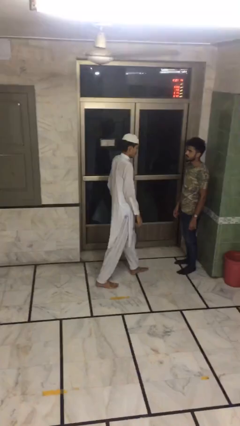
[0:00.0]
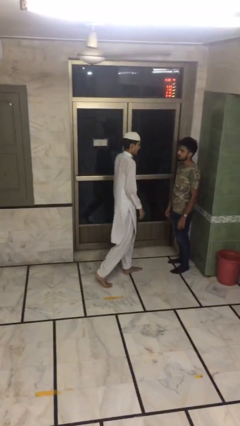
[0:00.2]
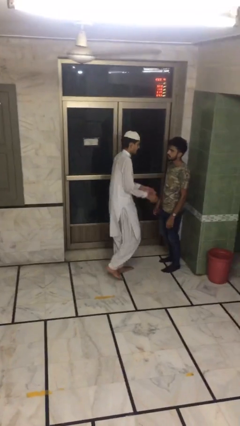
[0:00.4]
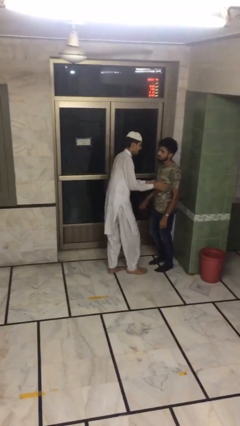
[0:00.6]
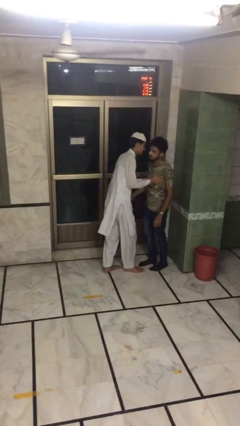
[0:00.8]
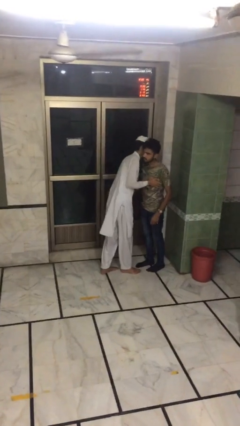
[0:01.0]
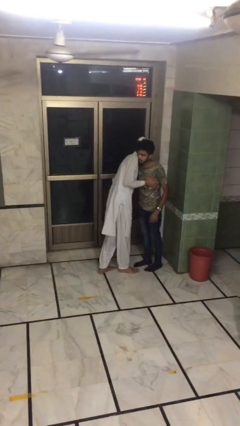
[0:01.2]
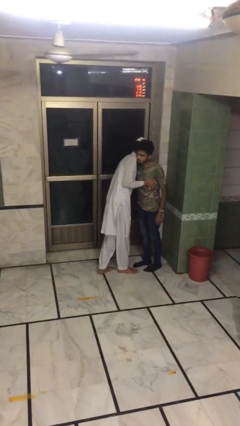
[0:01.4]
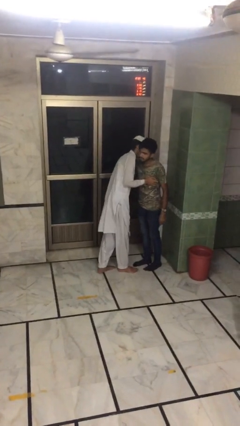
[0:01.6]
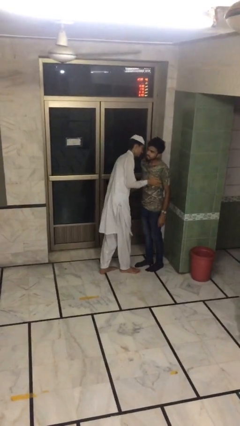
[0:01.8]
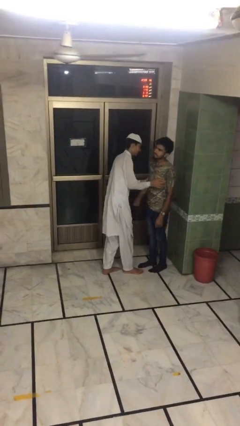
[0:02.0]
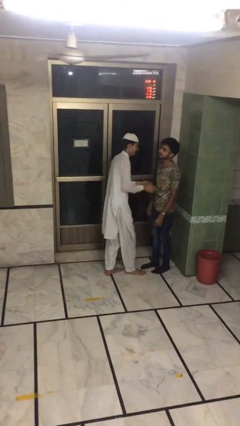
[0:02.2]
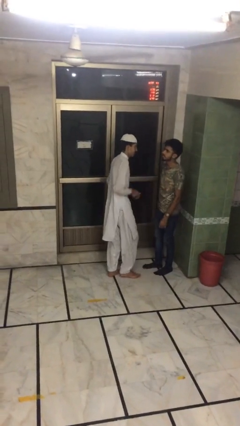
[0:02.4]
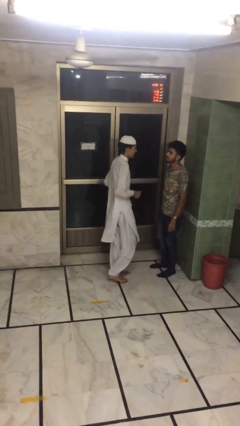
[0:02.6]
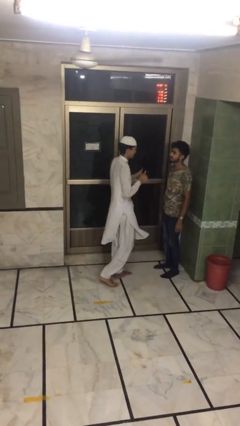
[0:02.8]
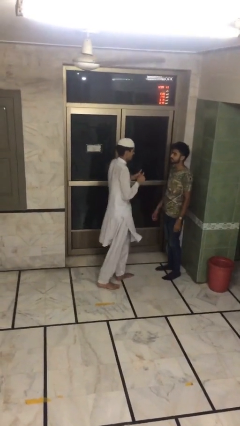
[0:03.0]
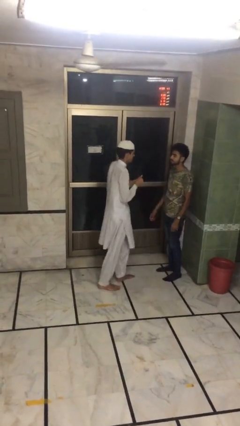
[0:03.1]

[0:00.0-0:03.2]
person embraces person

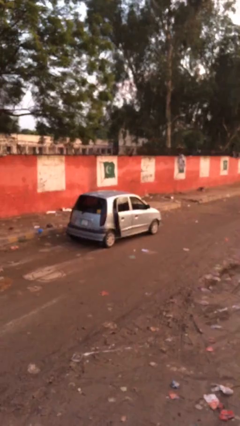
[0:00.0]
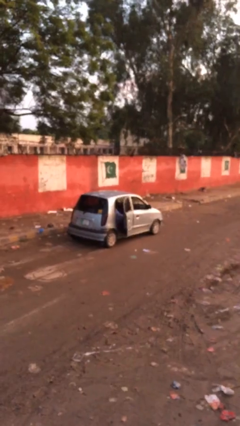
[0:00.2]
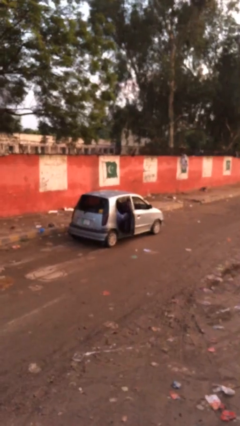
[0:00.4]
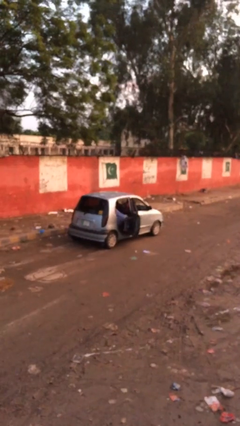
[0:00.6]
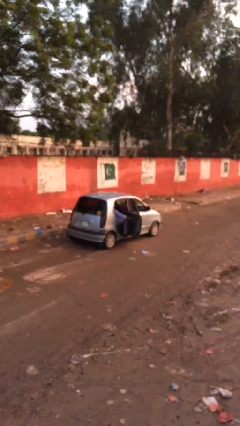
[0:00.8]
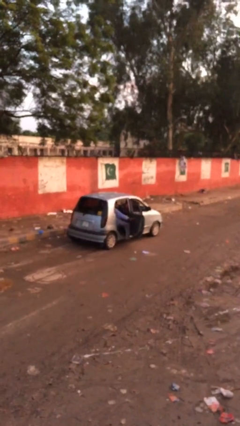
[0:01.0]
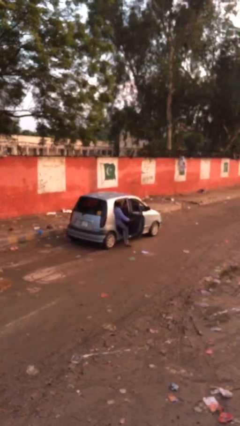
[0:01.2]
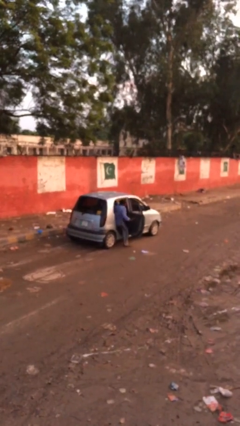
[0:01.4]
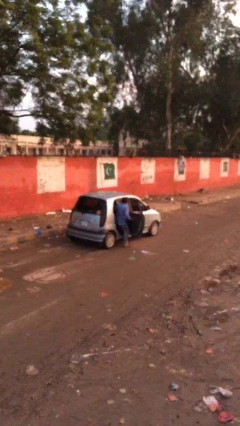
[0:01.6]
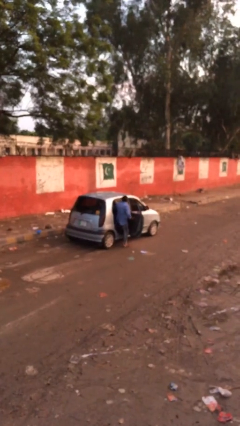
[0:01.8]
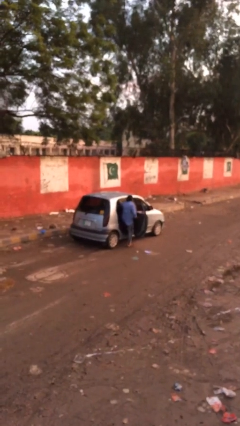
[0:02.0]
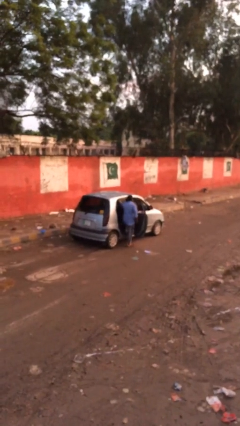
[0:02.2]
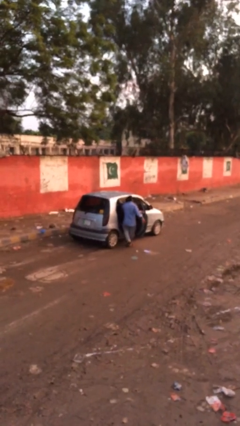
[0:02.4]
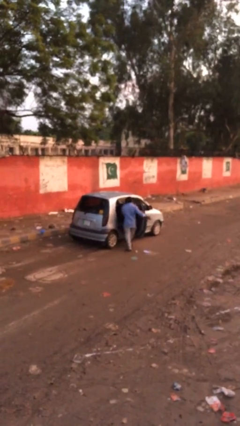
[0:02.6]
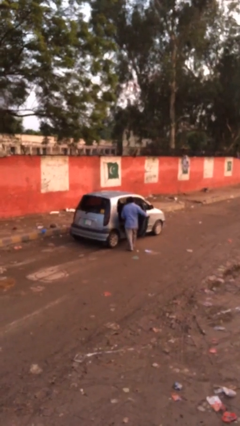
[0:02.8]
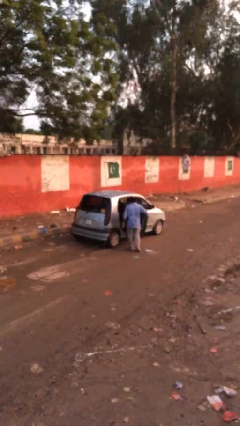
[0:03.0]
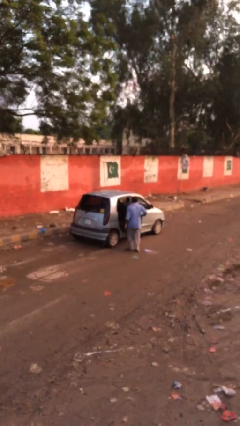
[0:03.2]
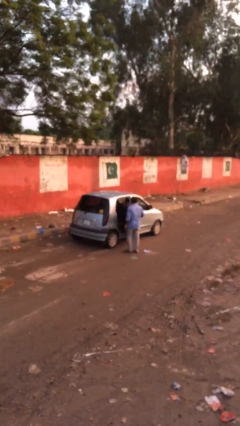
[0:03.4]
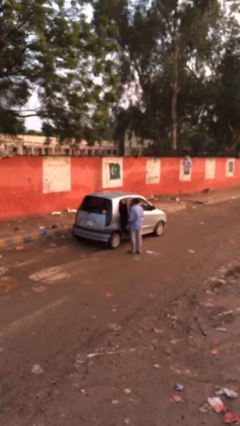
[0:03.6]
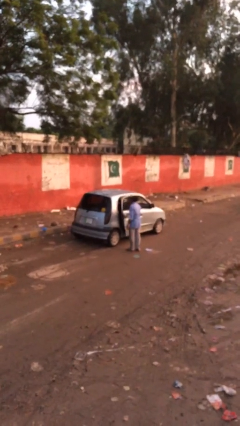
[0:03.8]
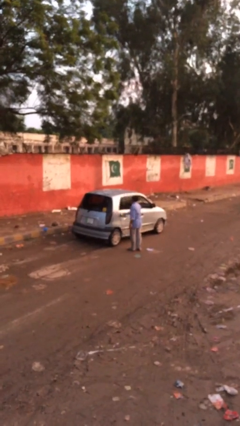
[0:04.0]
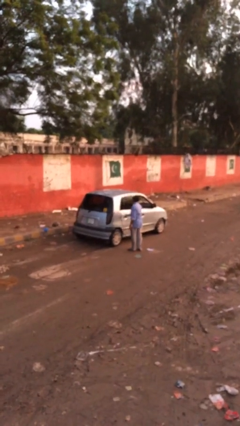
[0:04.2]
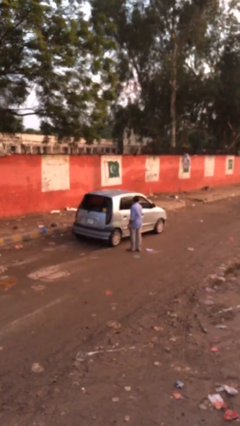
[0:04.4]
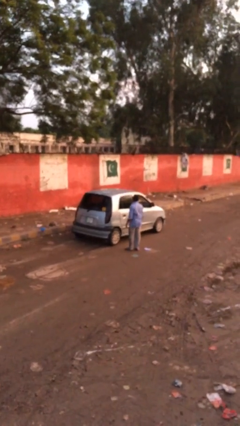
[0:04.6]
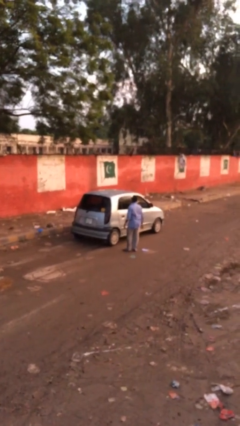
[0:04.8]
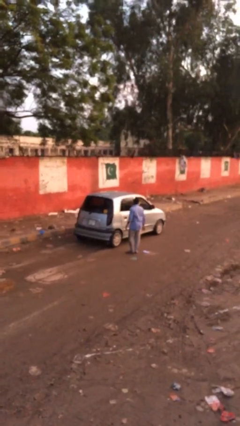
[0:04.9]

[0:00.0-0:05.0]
car drops off person

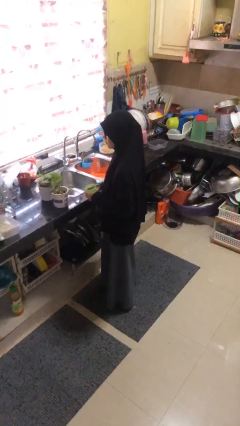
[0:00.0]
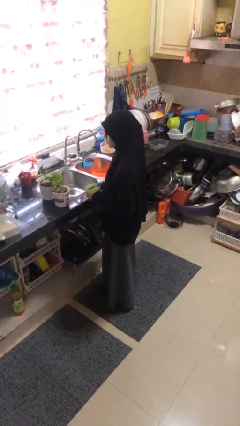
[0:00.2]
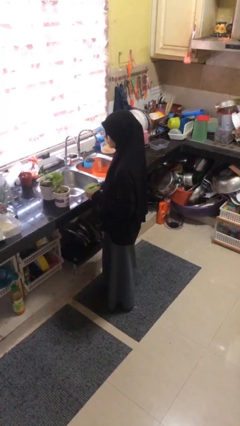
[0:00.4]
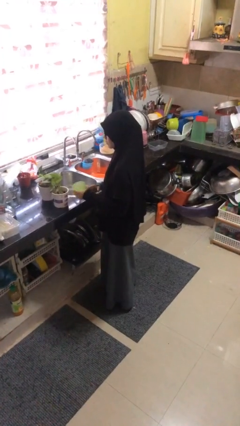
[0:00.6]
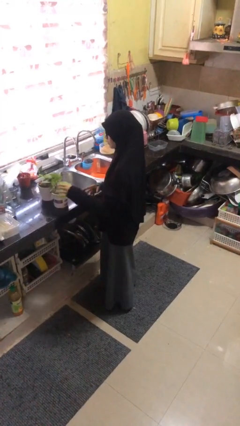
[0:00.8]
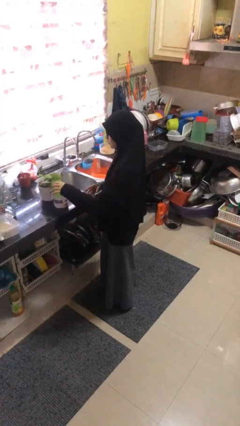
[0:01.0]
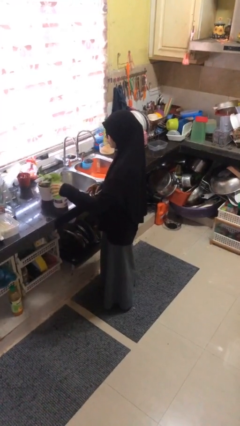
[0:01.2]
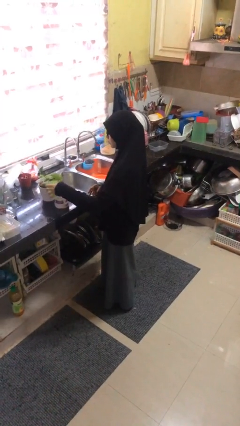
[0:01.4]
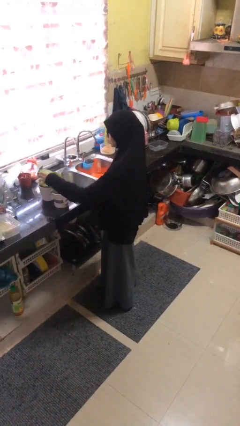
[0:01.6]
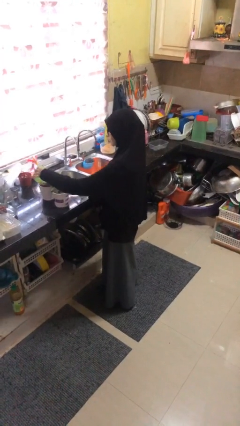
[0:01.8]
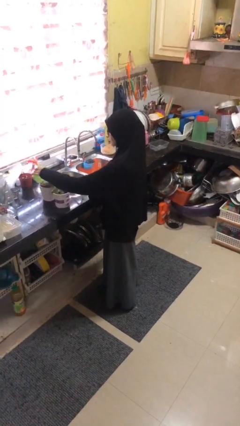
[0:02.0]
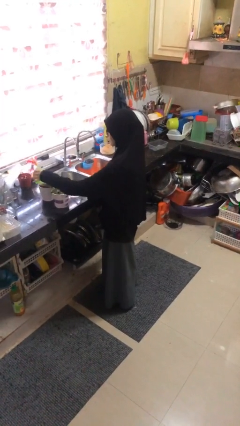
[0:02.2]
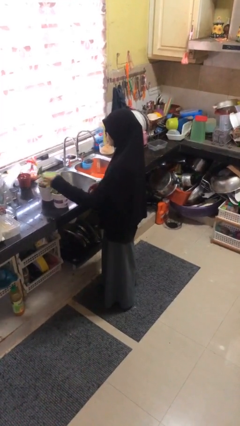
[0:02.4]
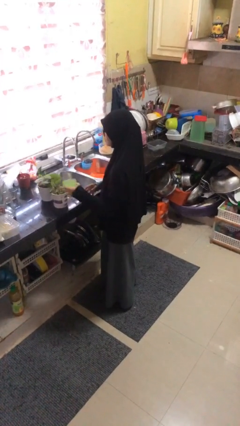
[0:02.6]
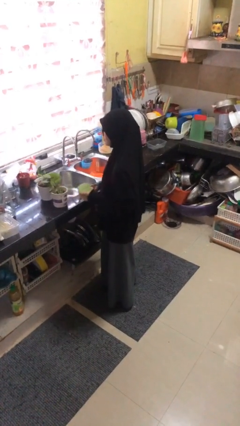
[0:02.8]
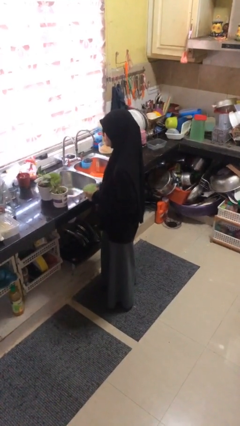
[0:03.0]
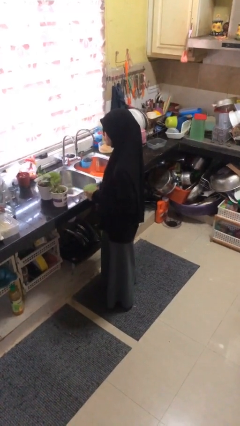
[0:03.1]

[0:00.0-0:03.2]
person waters houseplant

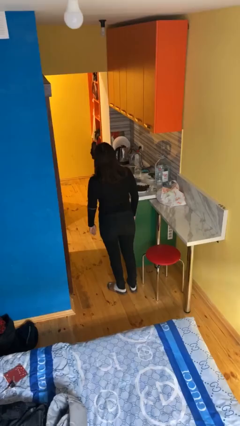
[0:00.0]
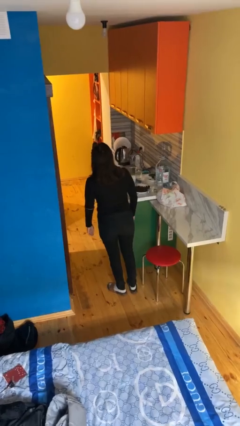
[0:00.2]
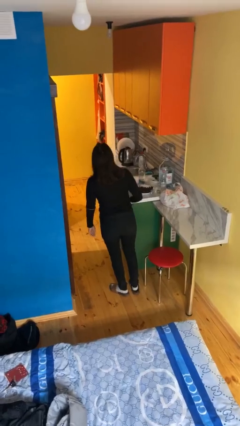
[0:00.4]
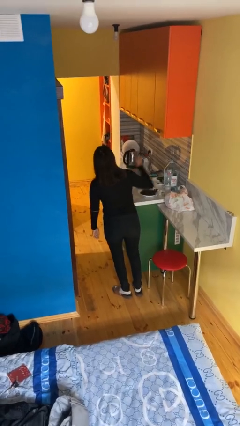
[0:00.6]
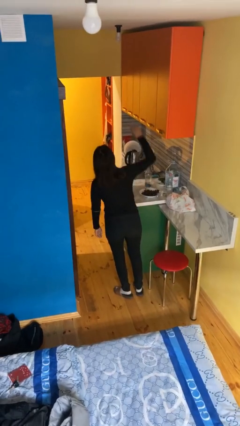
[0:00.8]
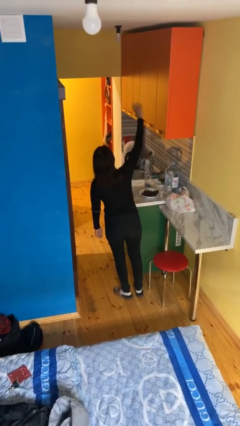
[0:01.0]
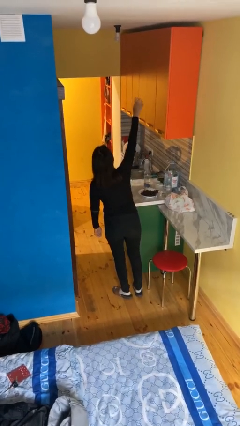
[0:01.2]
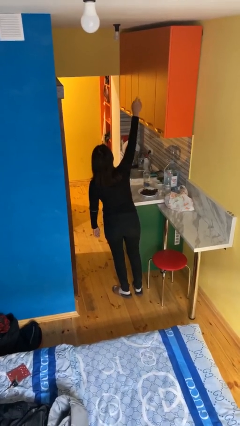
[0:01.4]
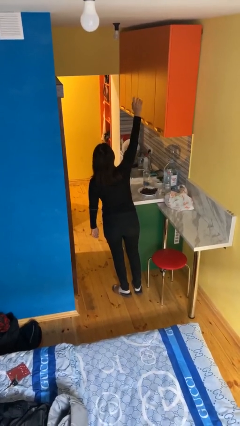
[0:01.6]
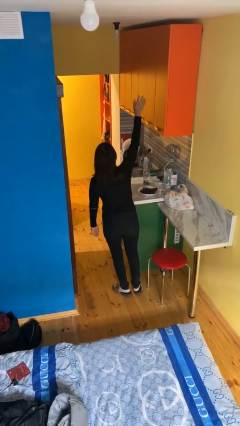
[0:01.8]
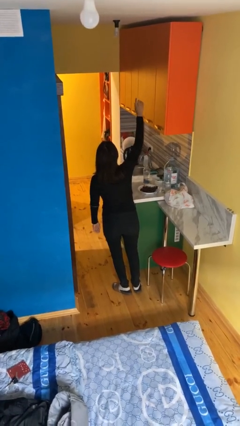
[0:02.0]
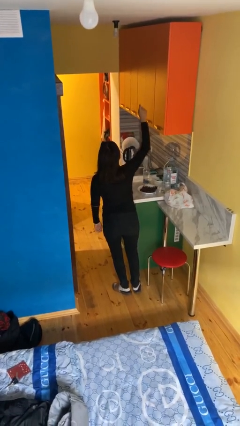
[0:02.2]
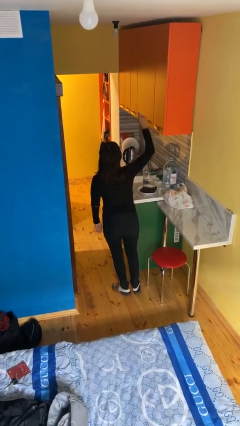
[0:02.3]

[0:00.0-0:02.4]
person gestures raise hand

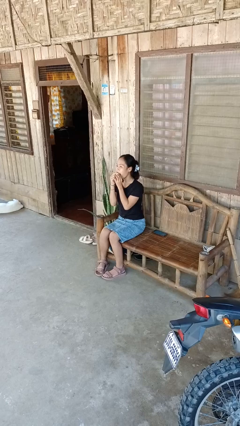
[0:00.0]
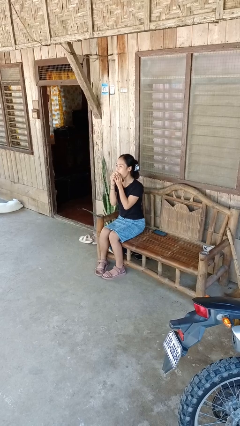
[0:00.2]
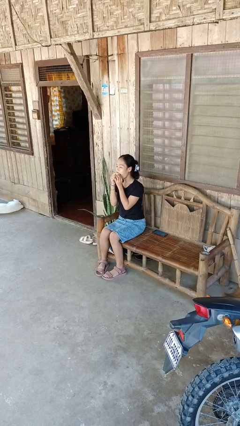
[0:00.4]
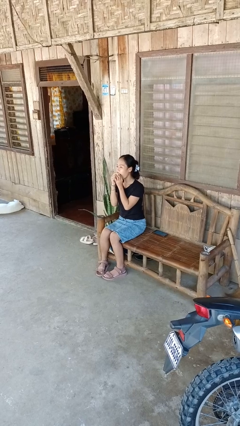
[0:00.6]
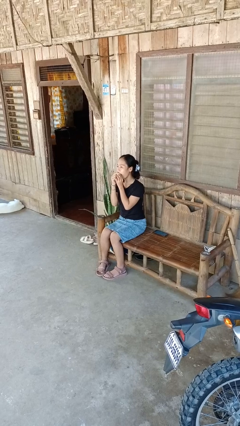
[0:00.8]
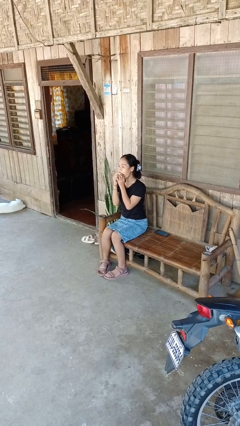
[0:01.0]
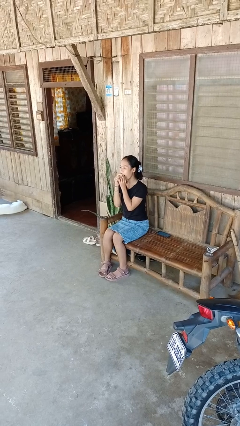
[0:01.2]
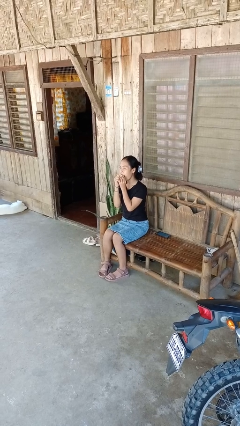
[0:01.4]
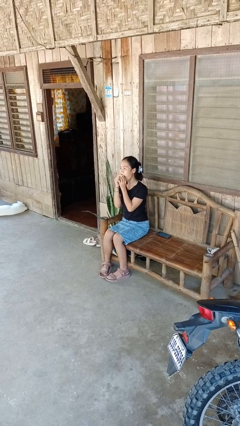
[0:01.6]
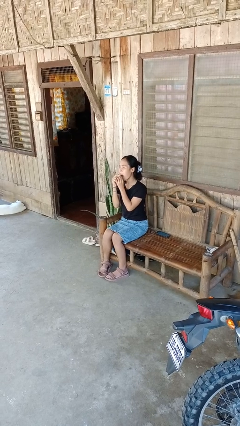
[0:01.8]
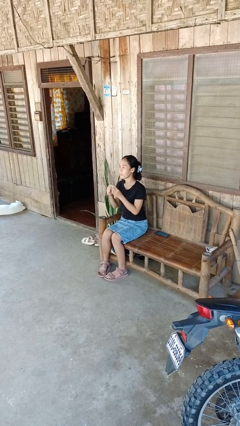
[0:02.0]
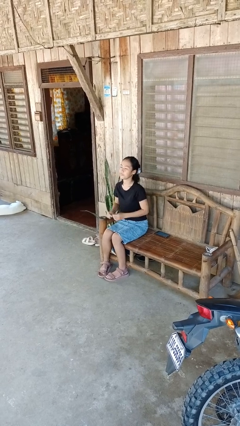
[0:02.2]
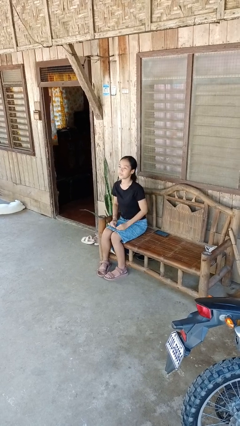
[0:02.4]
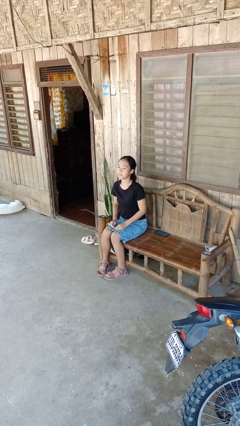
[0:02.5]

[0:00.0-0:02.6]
person flosses

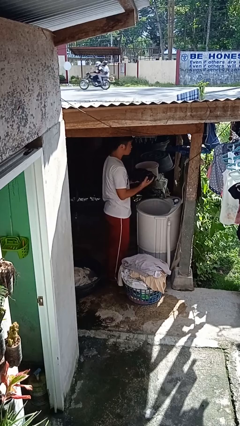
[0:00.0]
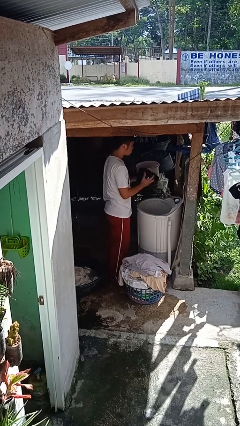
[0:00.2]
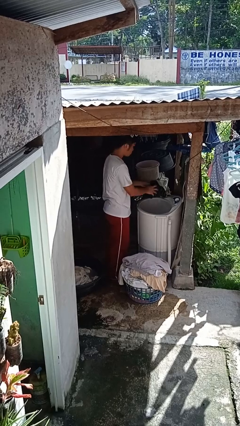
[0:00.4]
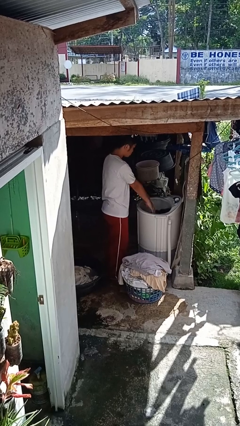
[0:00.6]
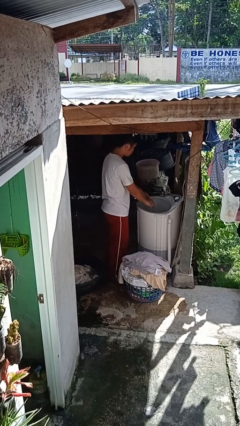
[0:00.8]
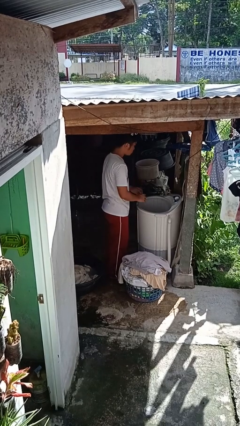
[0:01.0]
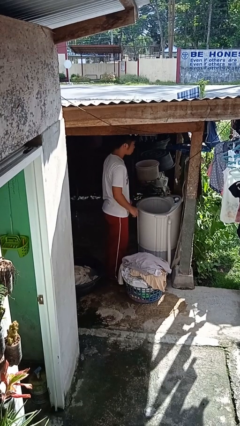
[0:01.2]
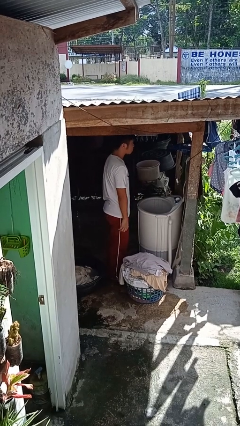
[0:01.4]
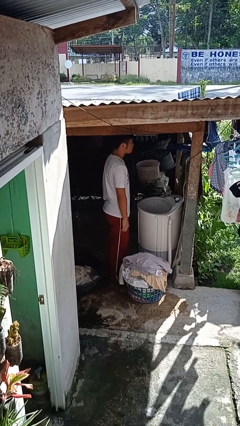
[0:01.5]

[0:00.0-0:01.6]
person loads clotheswasher
